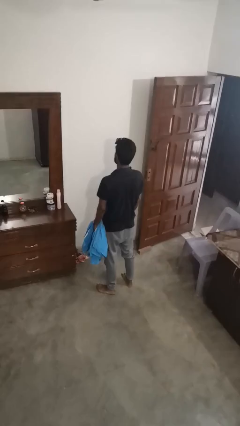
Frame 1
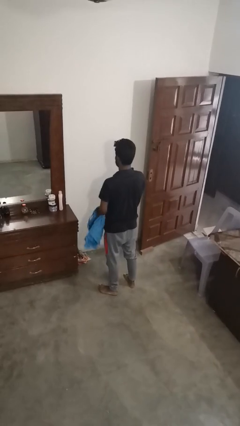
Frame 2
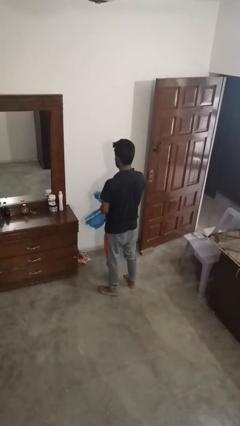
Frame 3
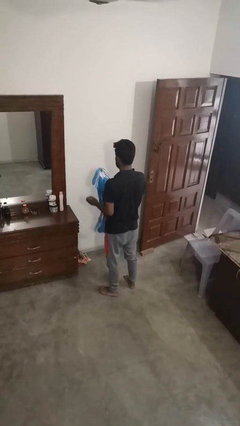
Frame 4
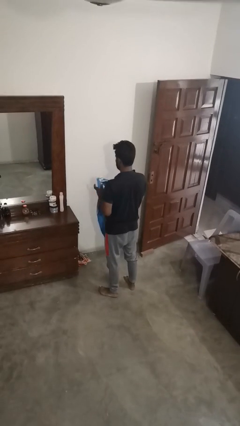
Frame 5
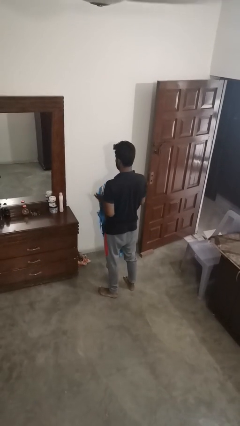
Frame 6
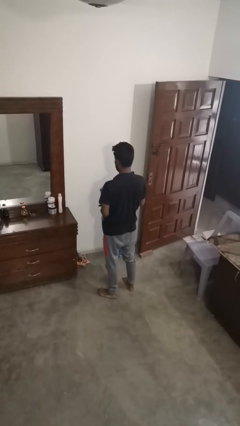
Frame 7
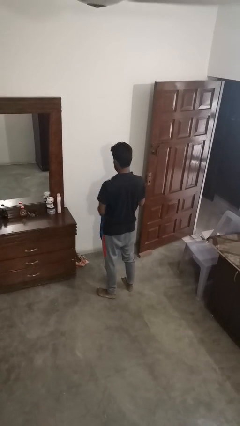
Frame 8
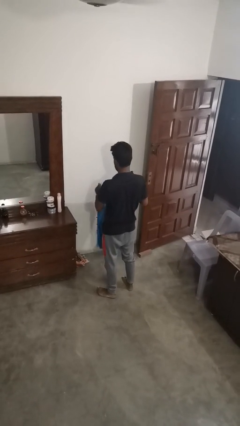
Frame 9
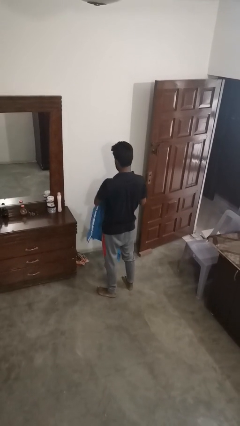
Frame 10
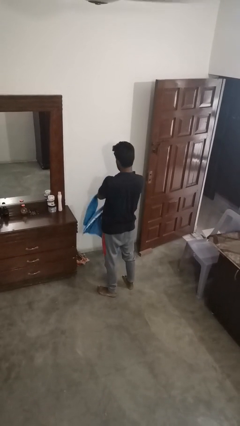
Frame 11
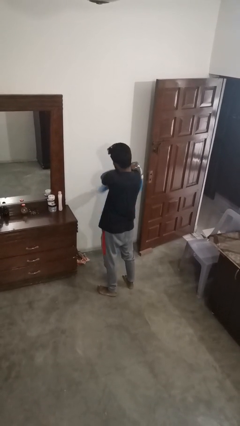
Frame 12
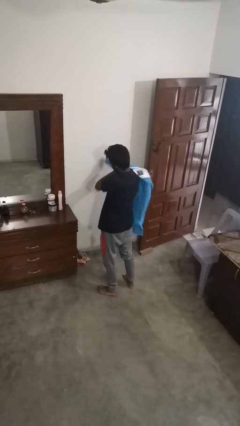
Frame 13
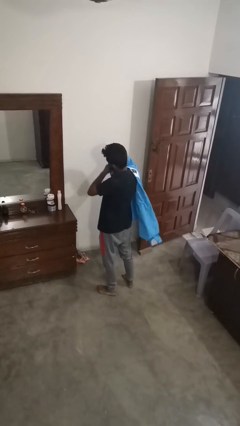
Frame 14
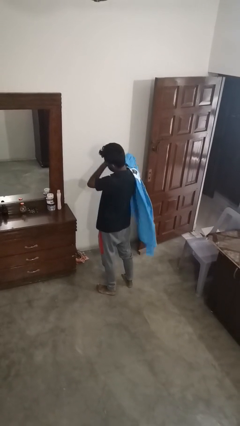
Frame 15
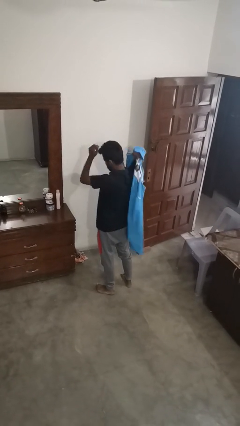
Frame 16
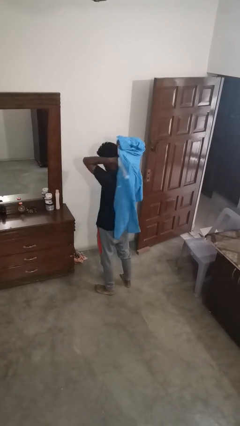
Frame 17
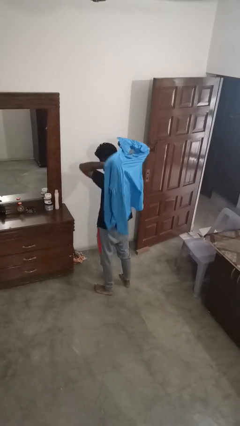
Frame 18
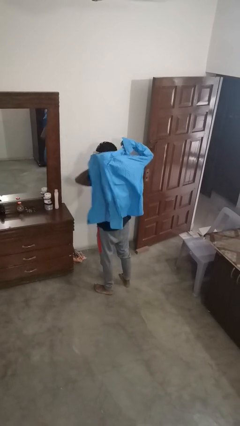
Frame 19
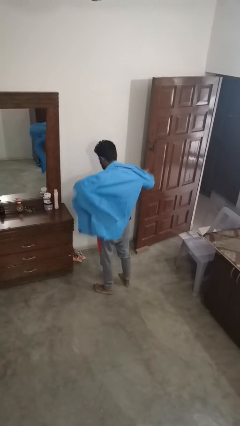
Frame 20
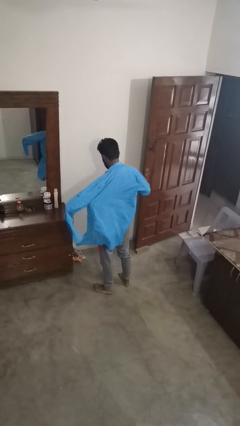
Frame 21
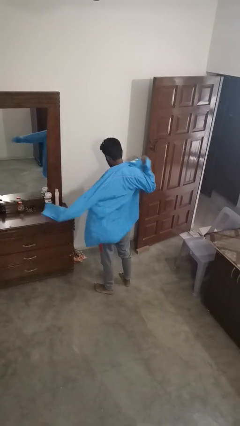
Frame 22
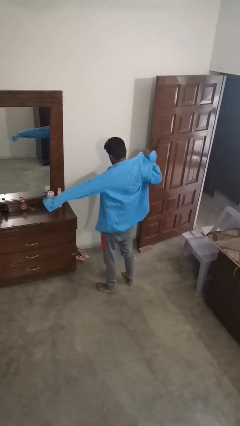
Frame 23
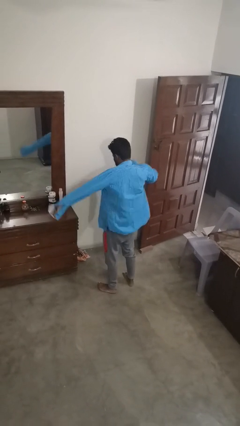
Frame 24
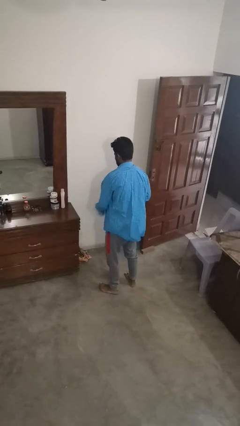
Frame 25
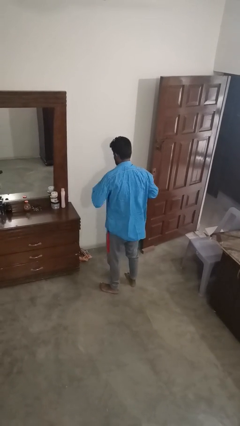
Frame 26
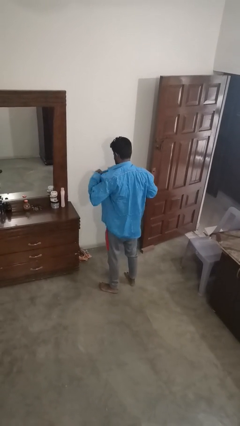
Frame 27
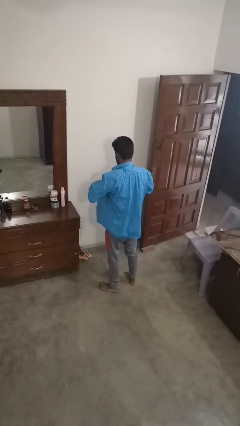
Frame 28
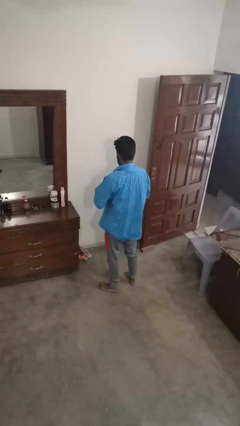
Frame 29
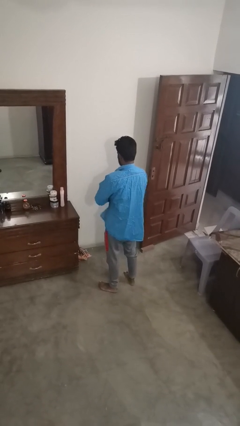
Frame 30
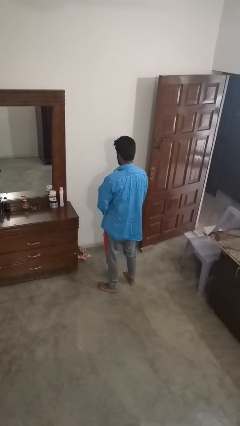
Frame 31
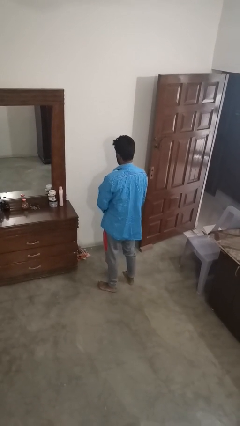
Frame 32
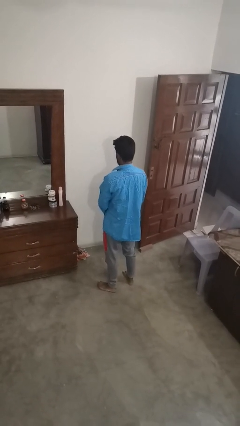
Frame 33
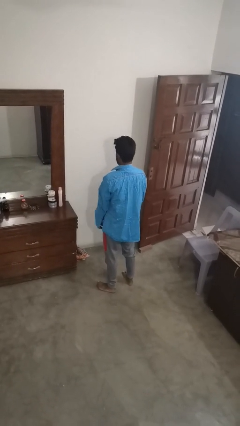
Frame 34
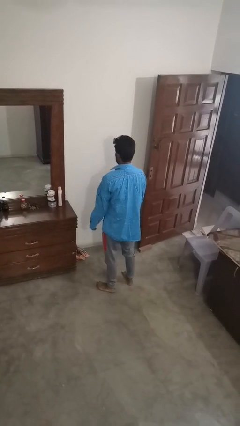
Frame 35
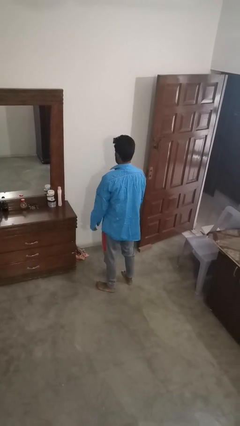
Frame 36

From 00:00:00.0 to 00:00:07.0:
person puts on shirt

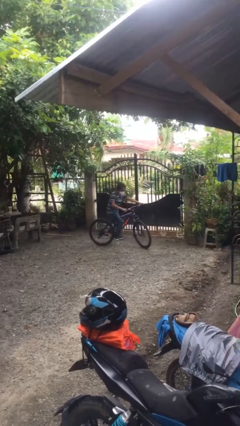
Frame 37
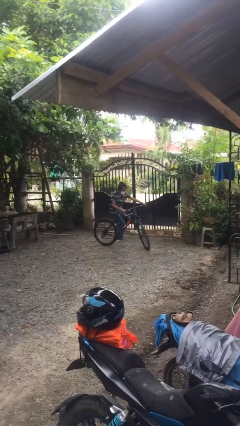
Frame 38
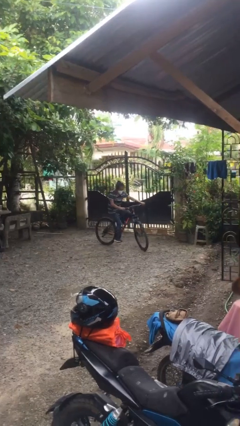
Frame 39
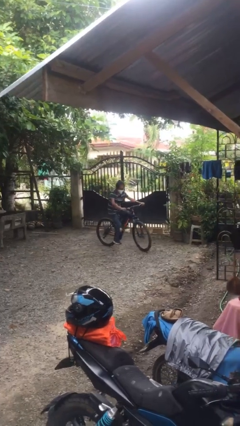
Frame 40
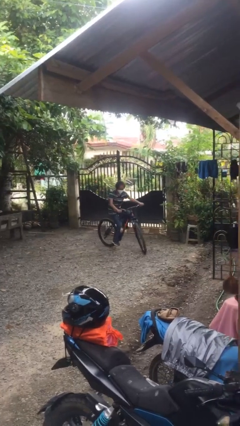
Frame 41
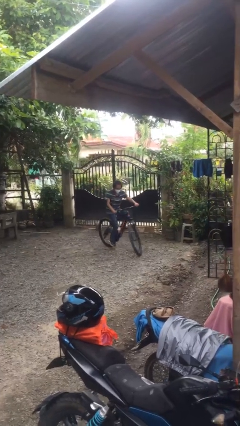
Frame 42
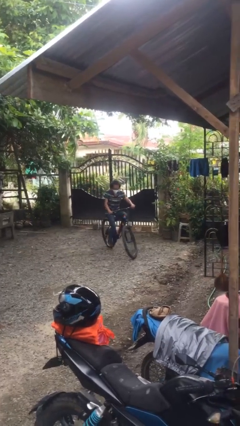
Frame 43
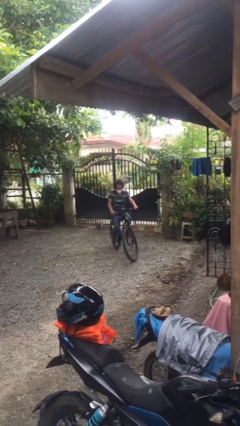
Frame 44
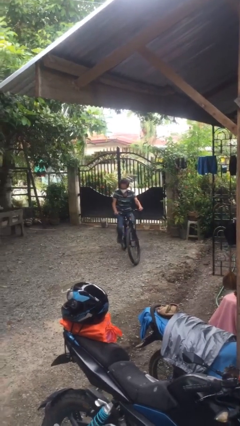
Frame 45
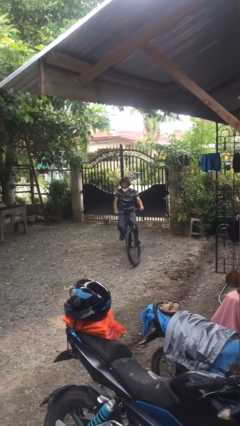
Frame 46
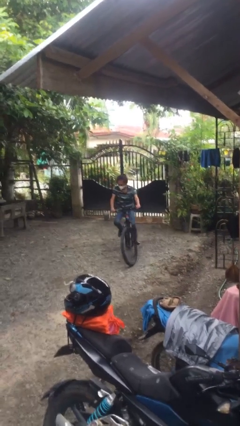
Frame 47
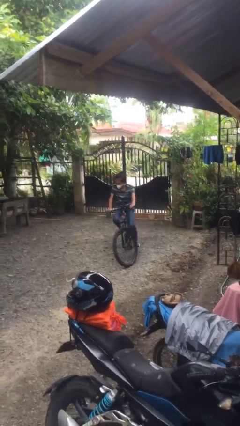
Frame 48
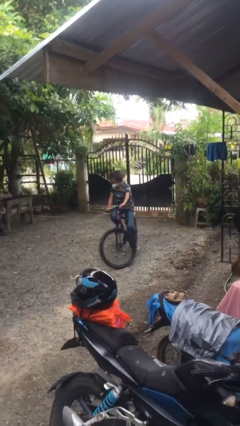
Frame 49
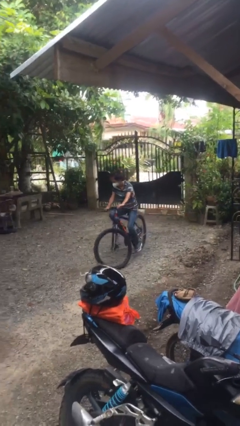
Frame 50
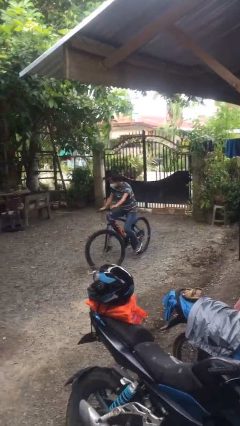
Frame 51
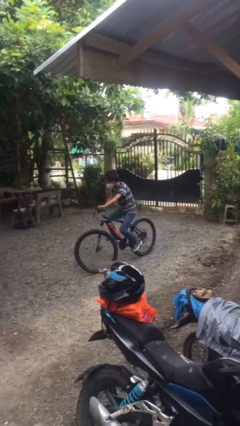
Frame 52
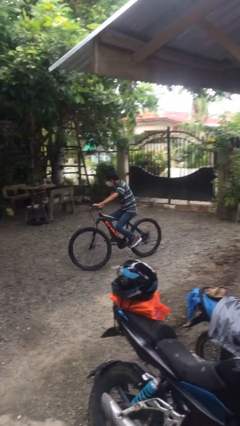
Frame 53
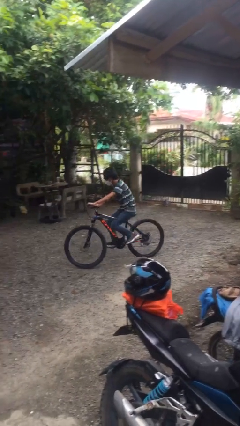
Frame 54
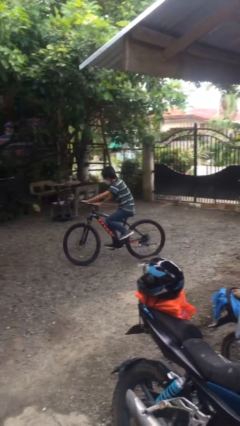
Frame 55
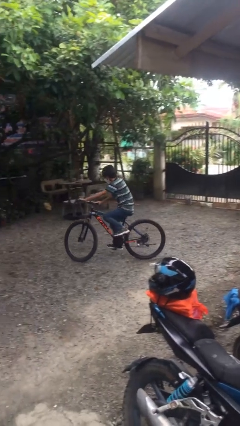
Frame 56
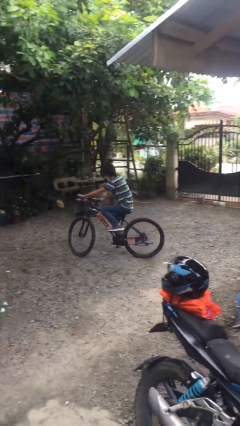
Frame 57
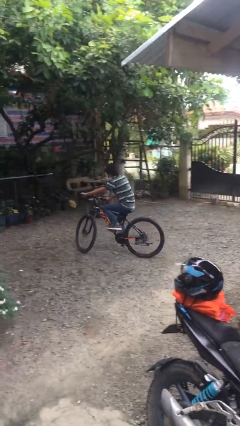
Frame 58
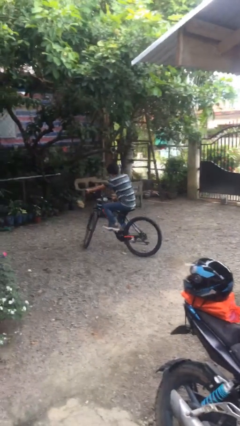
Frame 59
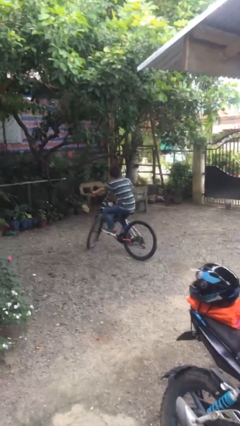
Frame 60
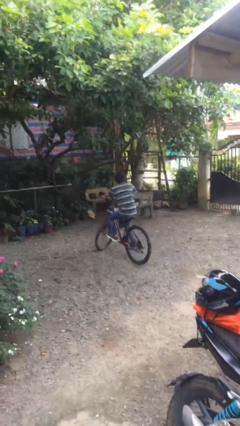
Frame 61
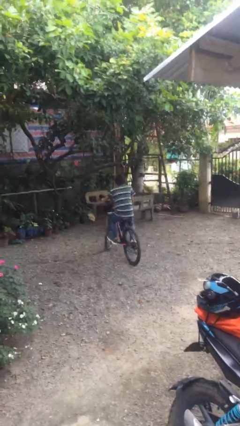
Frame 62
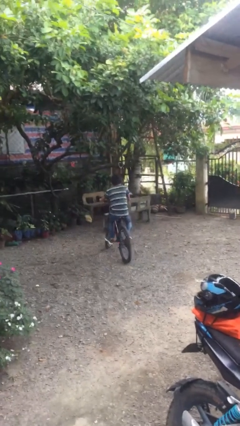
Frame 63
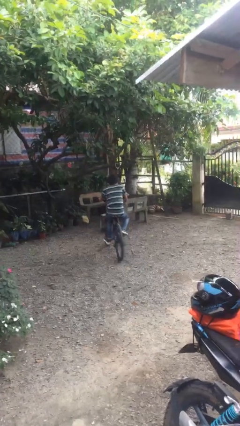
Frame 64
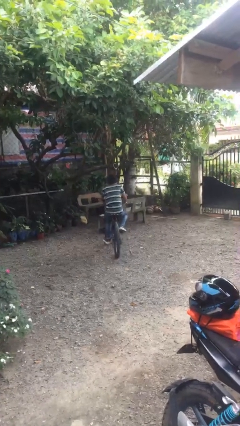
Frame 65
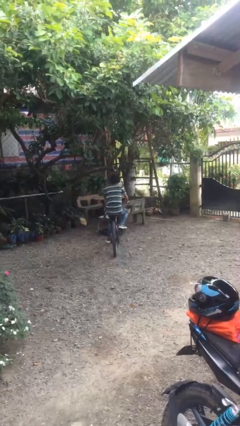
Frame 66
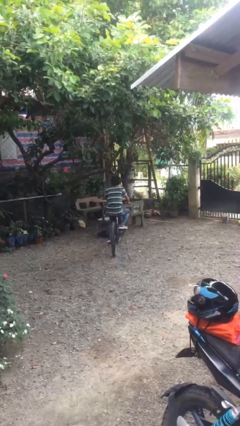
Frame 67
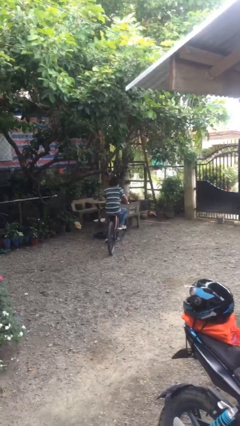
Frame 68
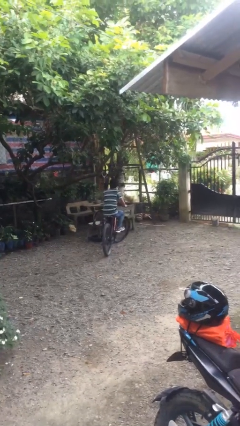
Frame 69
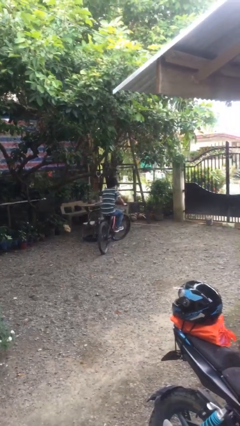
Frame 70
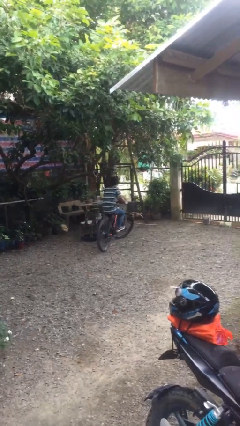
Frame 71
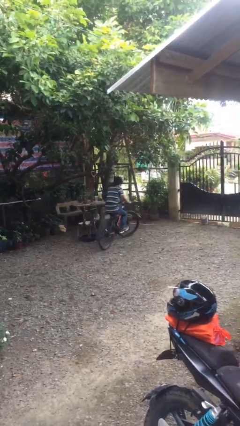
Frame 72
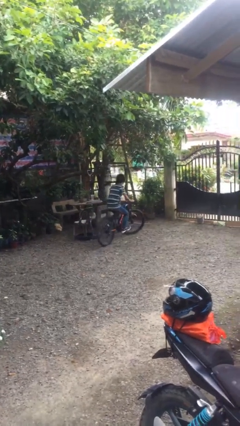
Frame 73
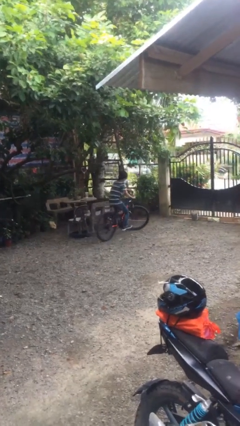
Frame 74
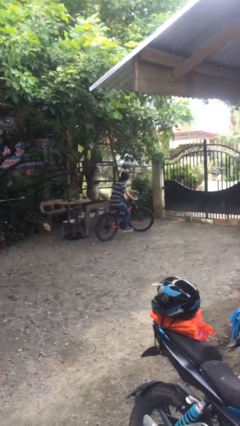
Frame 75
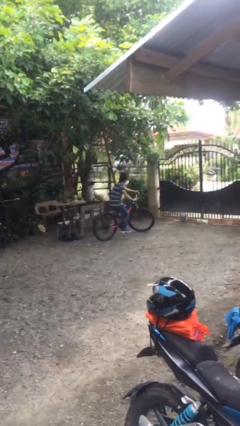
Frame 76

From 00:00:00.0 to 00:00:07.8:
person rides bicycle

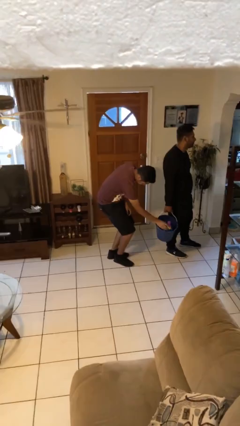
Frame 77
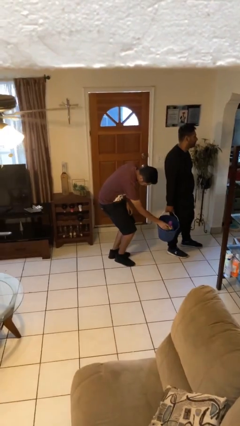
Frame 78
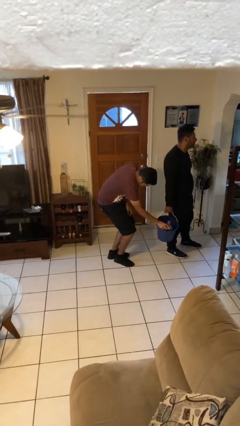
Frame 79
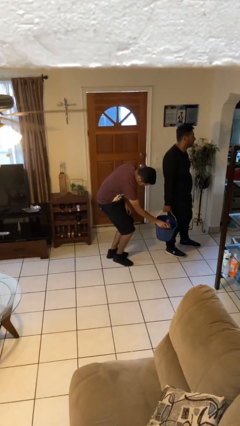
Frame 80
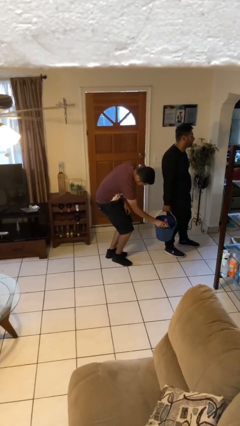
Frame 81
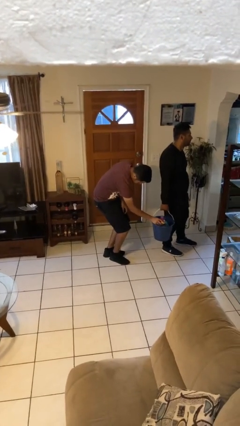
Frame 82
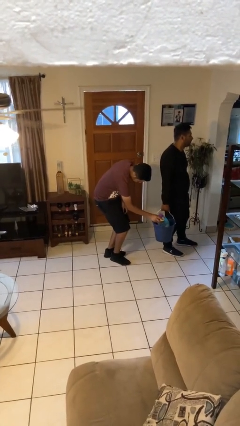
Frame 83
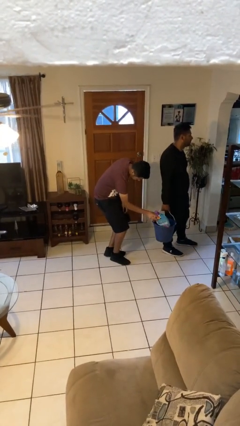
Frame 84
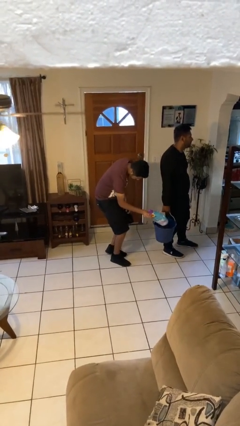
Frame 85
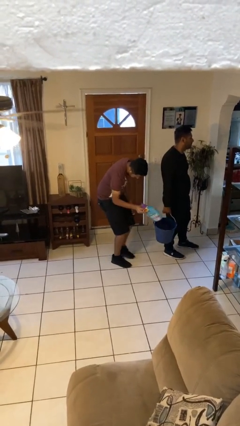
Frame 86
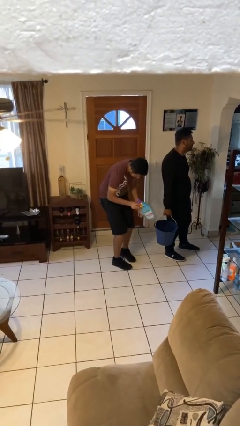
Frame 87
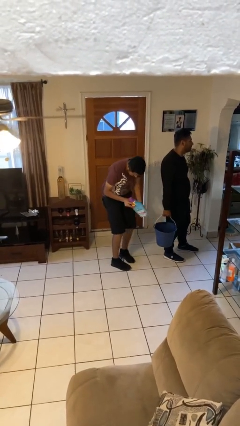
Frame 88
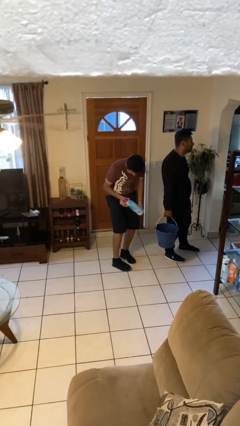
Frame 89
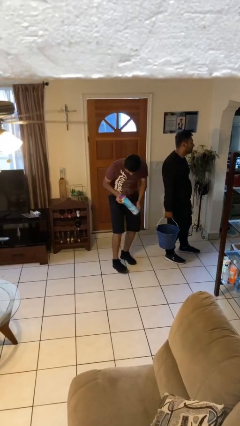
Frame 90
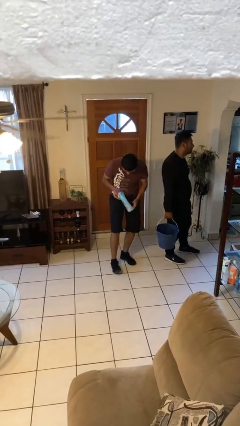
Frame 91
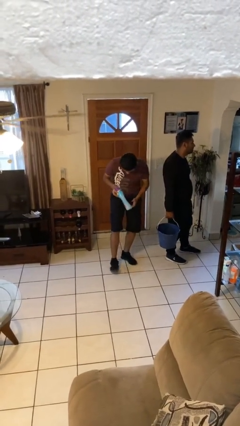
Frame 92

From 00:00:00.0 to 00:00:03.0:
person steals object from person

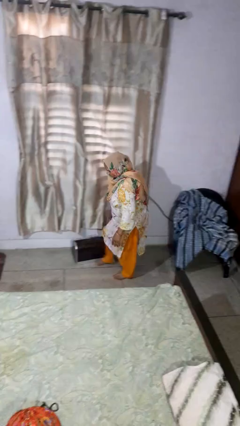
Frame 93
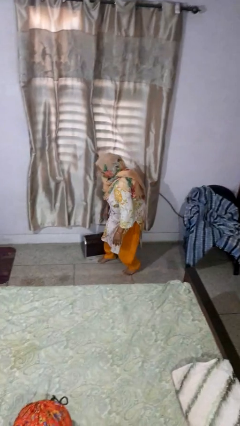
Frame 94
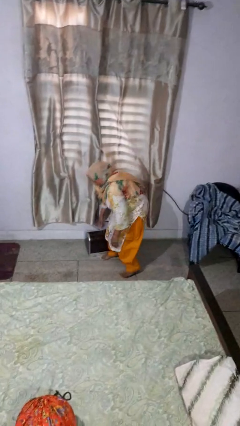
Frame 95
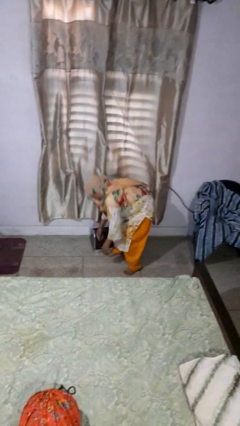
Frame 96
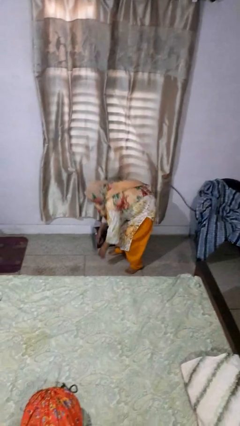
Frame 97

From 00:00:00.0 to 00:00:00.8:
person trips on object on floor
